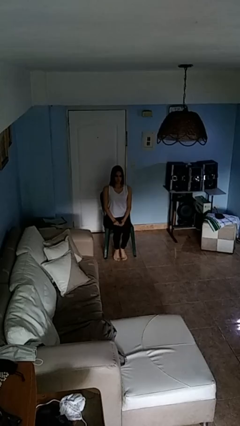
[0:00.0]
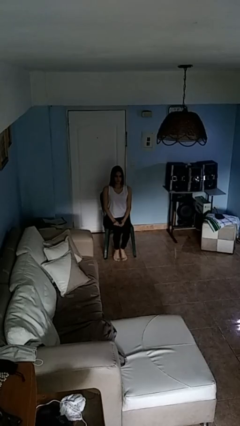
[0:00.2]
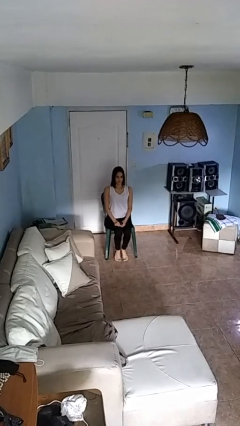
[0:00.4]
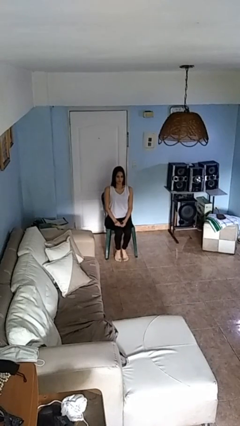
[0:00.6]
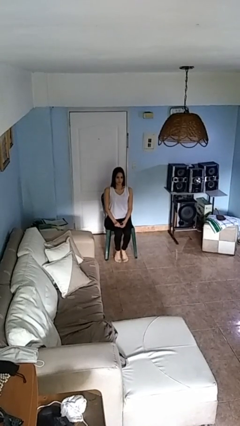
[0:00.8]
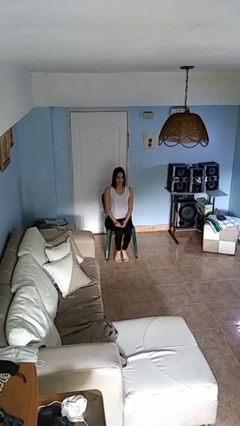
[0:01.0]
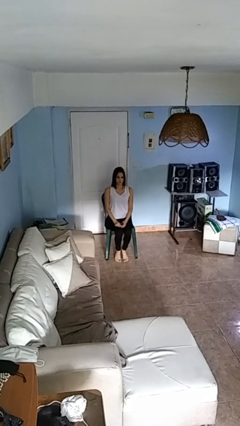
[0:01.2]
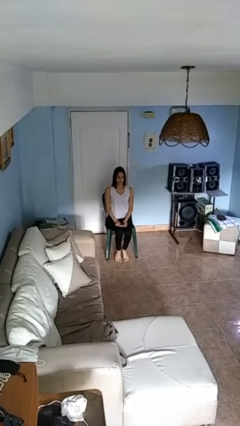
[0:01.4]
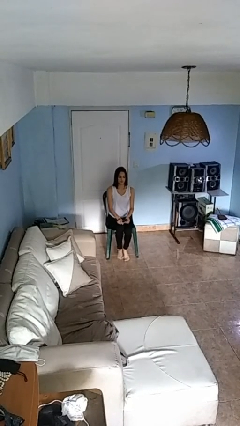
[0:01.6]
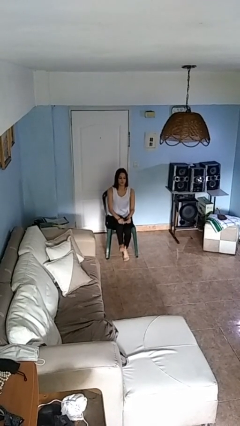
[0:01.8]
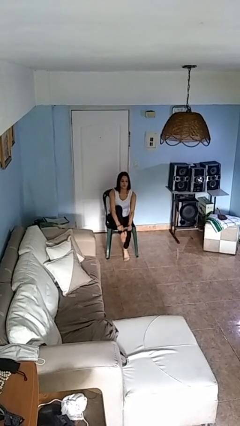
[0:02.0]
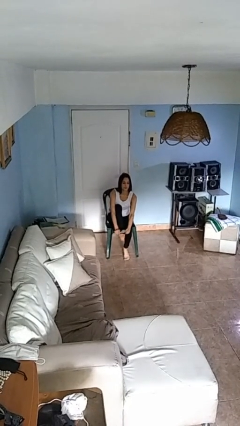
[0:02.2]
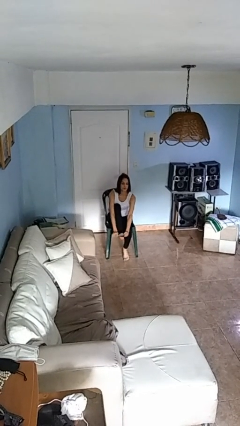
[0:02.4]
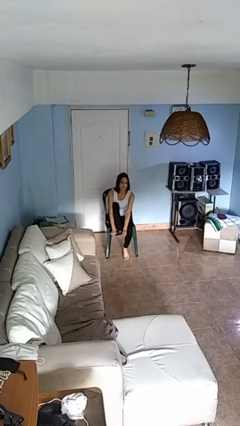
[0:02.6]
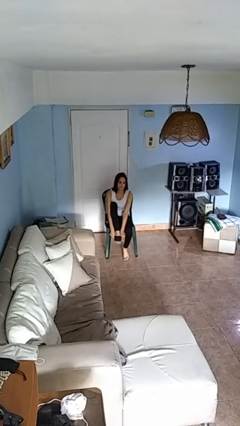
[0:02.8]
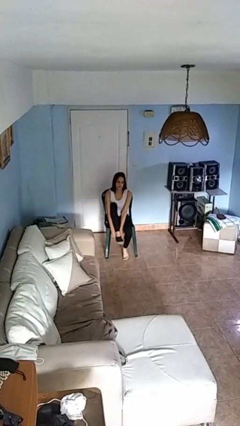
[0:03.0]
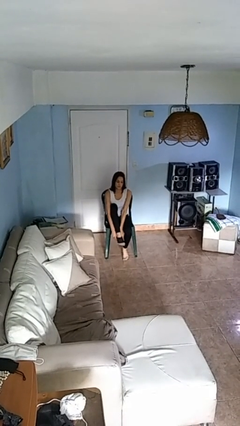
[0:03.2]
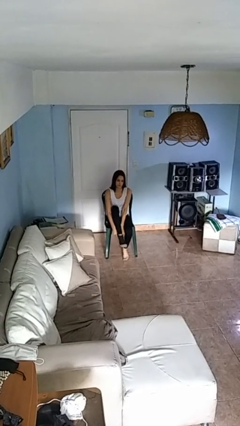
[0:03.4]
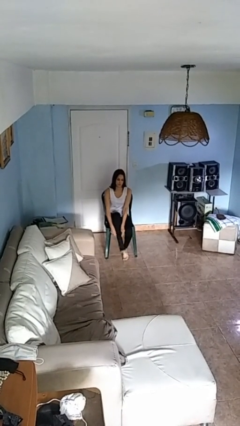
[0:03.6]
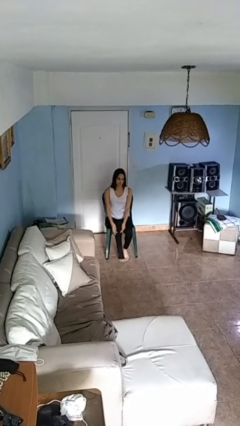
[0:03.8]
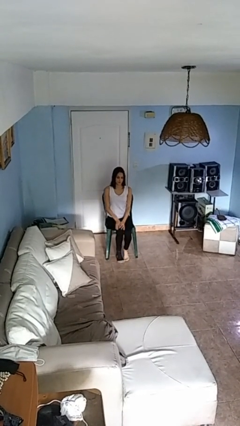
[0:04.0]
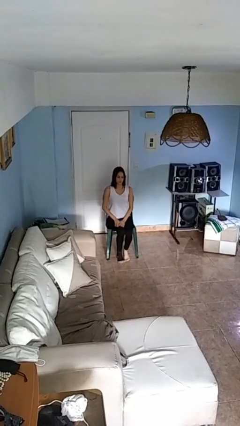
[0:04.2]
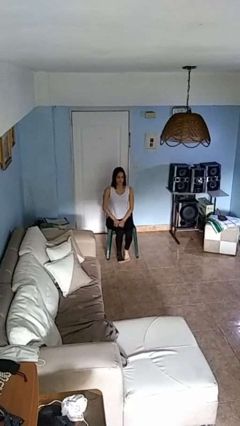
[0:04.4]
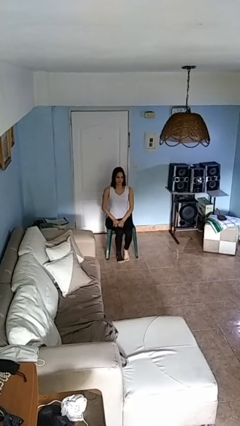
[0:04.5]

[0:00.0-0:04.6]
person puts on socks

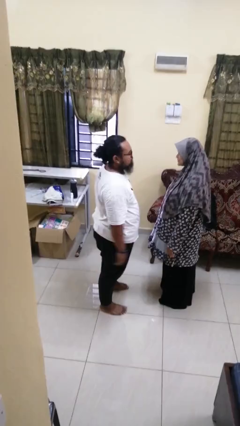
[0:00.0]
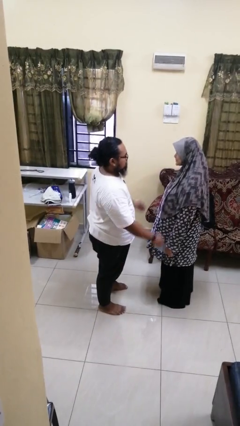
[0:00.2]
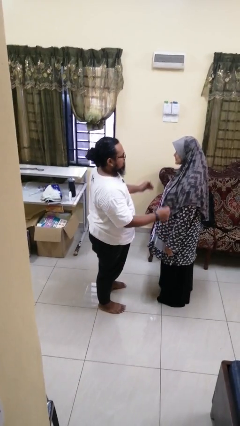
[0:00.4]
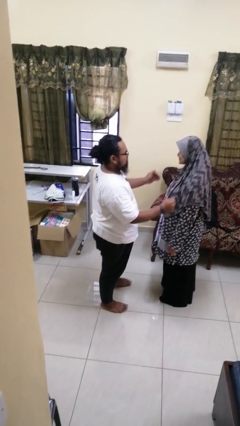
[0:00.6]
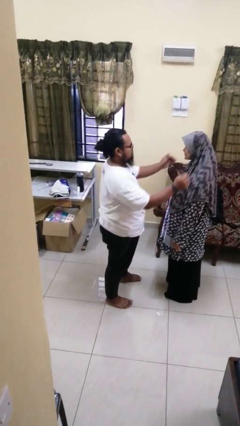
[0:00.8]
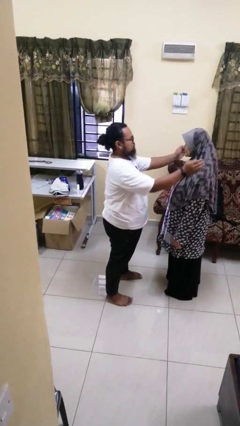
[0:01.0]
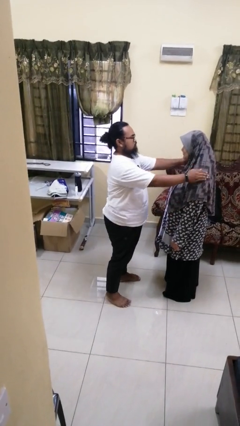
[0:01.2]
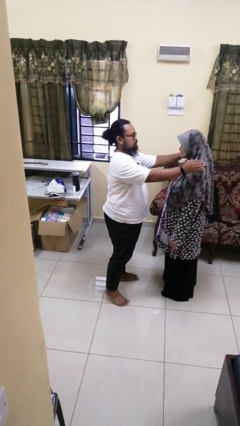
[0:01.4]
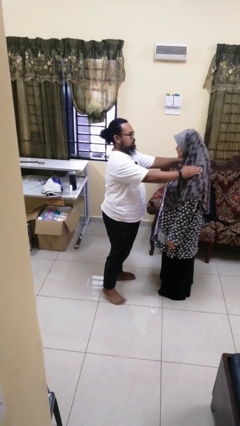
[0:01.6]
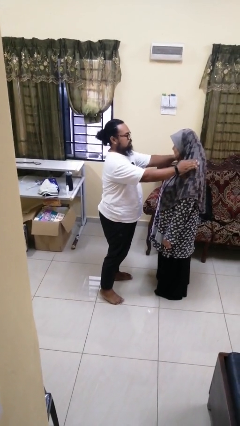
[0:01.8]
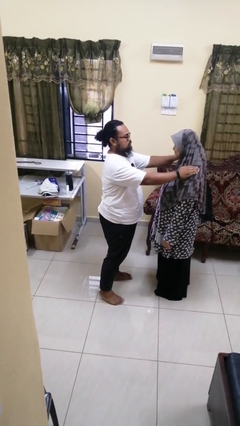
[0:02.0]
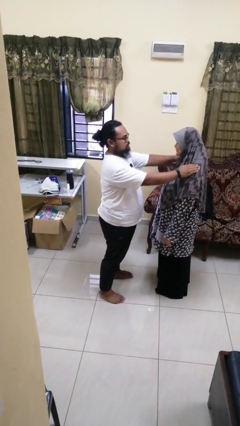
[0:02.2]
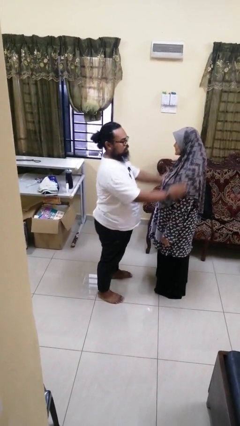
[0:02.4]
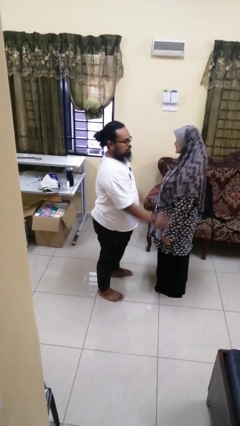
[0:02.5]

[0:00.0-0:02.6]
person pounds shoulders of person

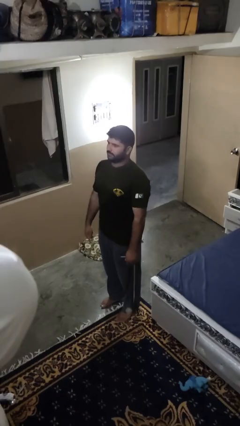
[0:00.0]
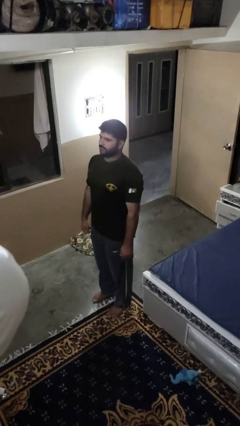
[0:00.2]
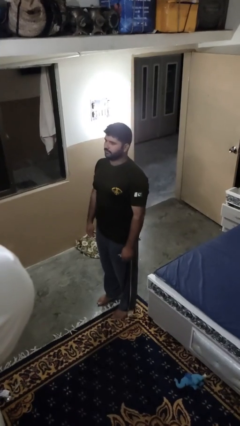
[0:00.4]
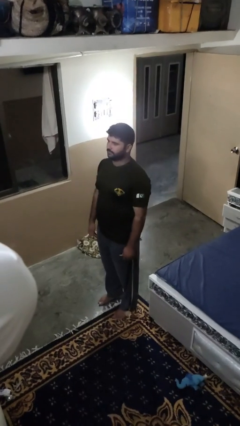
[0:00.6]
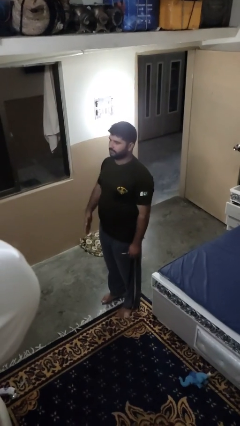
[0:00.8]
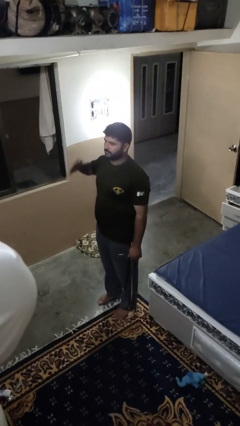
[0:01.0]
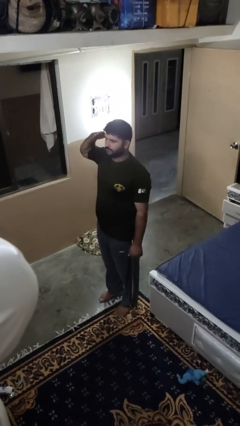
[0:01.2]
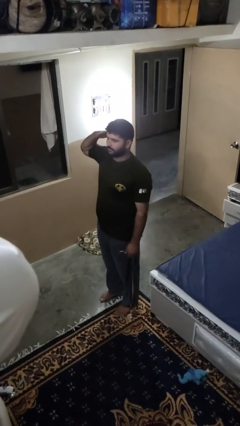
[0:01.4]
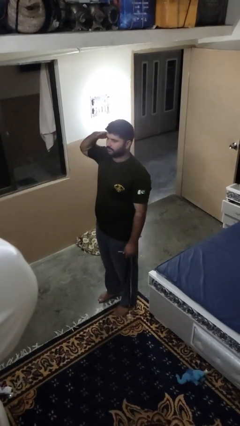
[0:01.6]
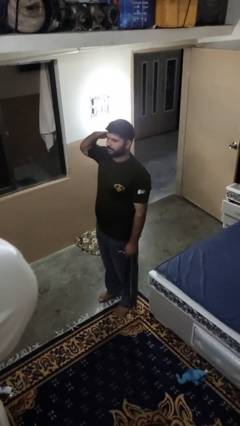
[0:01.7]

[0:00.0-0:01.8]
person salutes

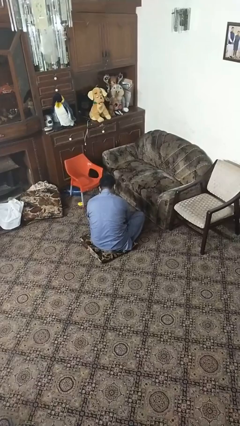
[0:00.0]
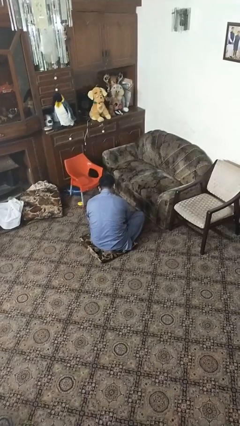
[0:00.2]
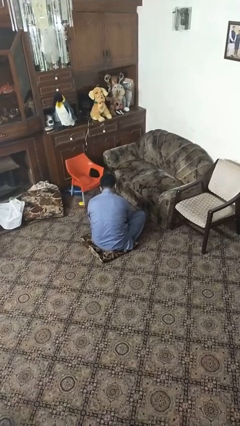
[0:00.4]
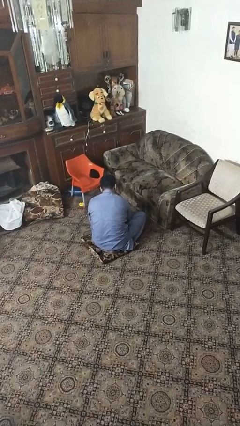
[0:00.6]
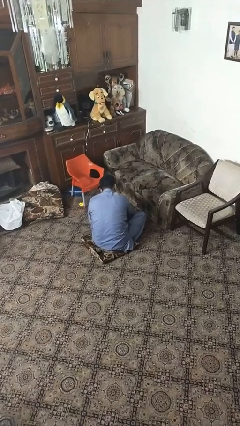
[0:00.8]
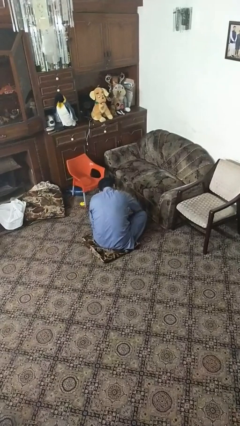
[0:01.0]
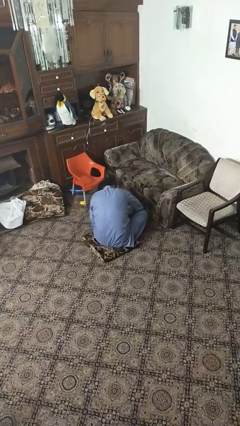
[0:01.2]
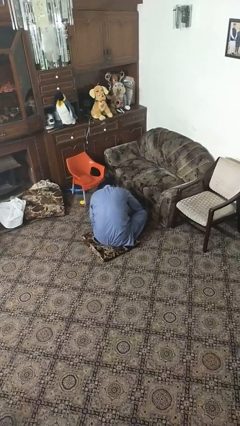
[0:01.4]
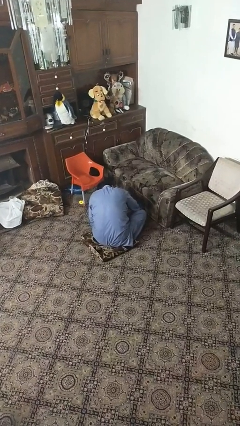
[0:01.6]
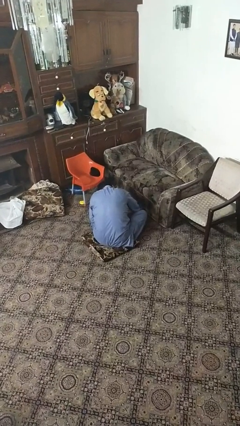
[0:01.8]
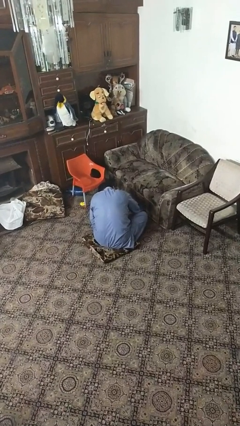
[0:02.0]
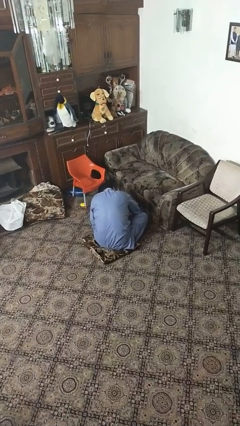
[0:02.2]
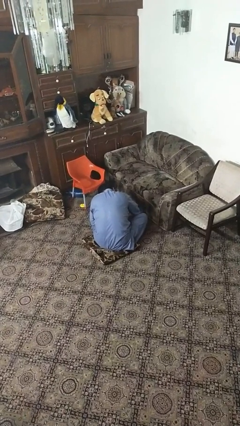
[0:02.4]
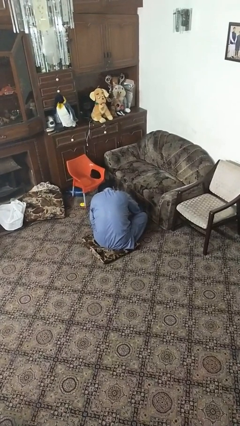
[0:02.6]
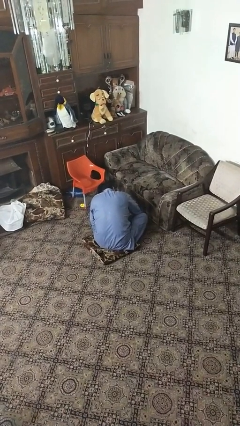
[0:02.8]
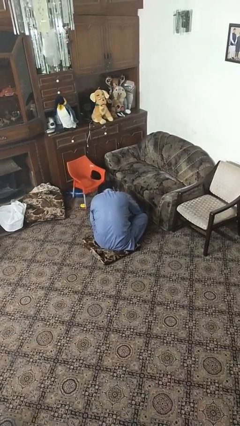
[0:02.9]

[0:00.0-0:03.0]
person searches under couch

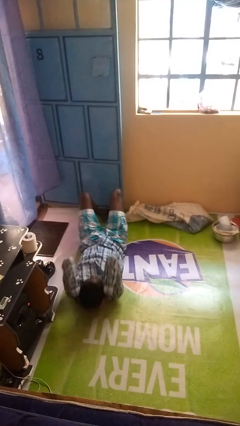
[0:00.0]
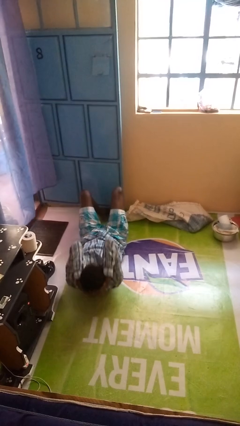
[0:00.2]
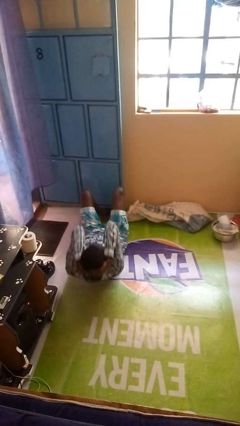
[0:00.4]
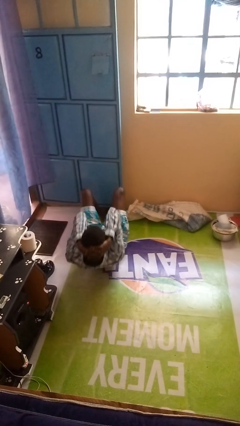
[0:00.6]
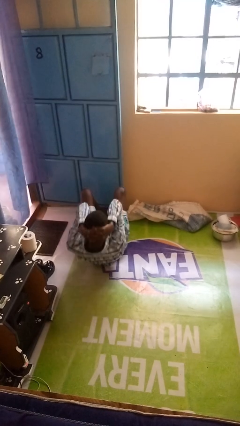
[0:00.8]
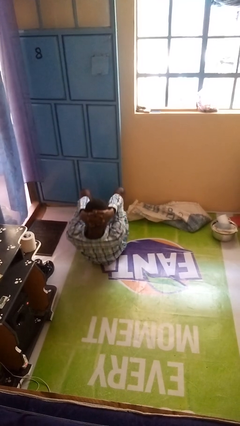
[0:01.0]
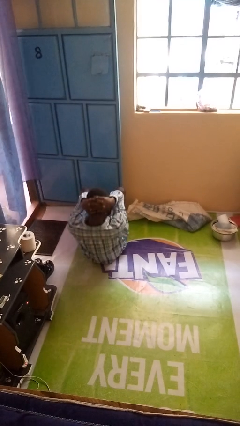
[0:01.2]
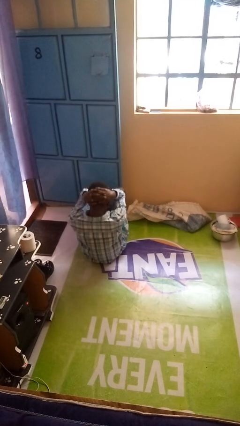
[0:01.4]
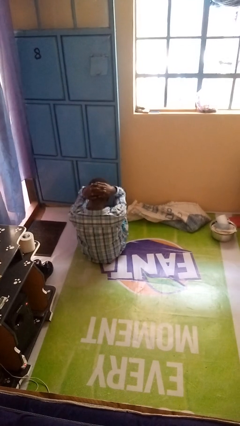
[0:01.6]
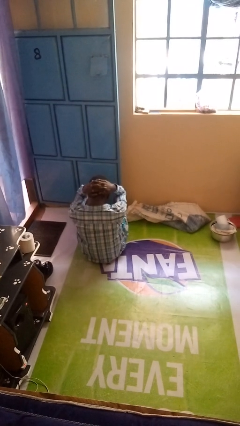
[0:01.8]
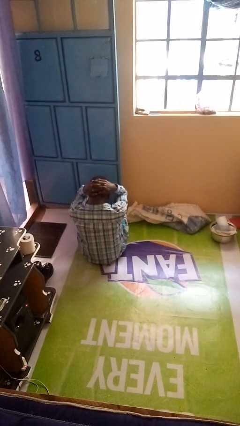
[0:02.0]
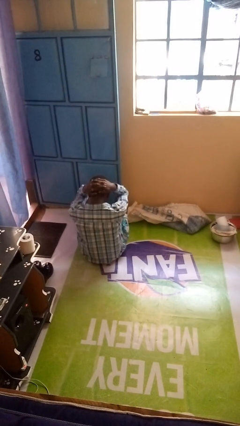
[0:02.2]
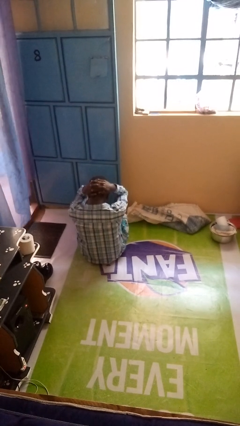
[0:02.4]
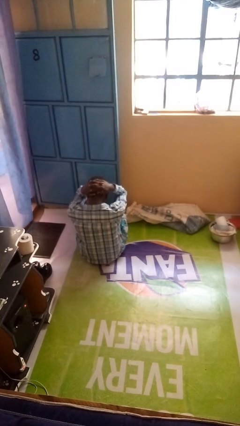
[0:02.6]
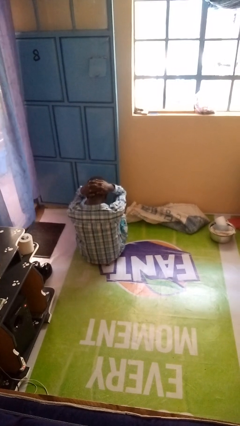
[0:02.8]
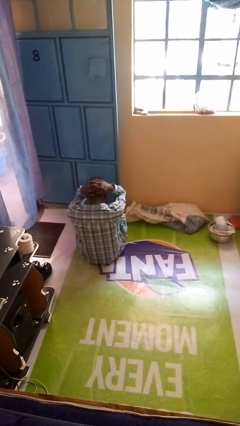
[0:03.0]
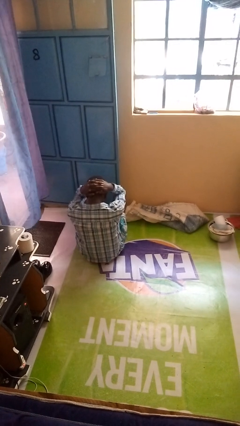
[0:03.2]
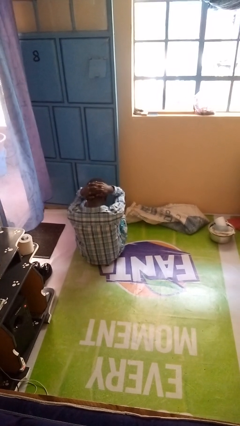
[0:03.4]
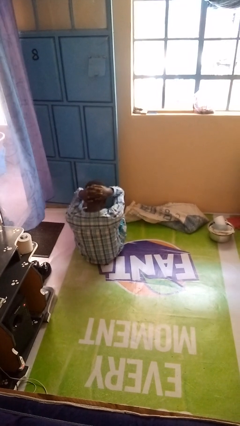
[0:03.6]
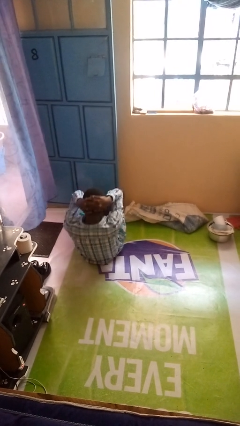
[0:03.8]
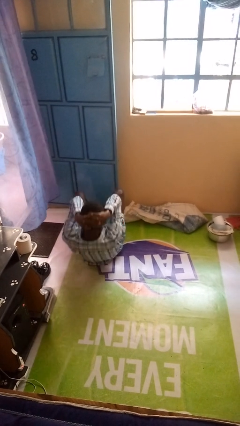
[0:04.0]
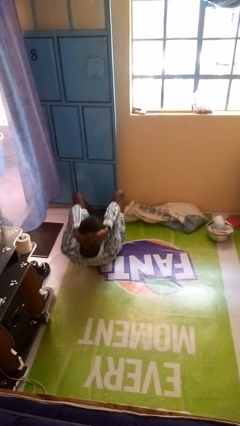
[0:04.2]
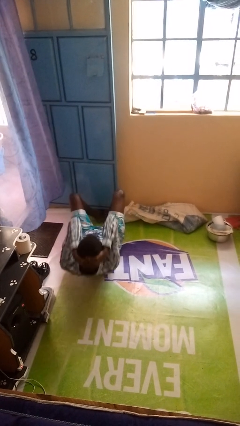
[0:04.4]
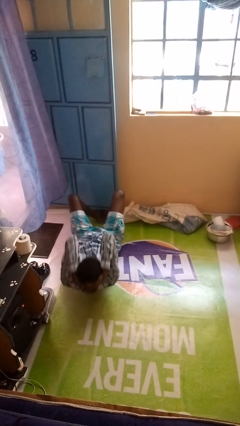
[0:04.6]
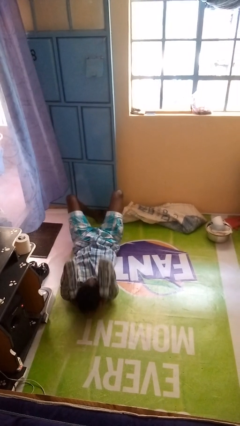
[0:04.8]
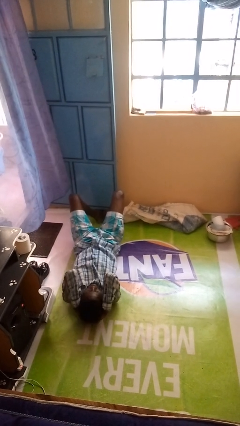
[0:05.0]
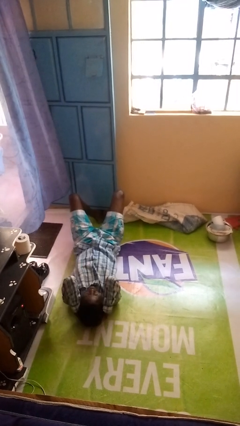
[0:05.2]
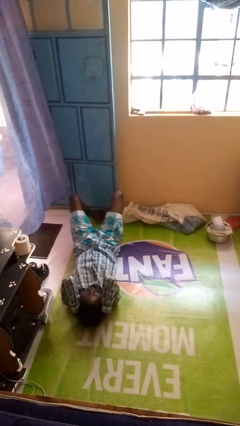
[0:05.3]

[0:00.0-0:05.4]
person exercises with situp

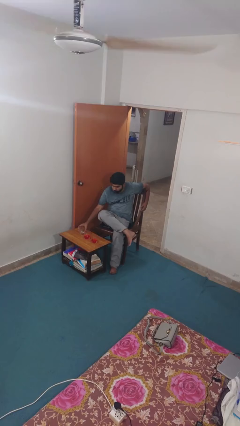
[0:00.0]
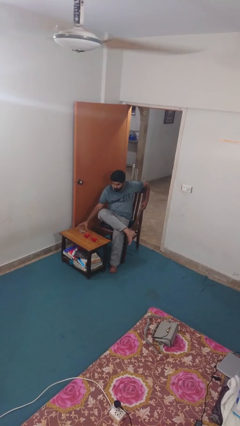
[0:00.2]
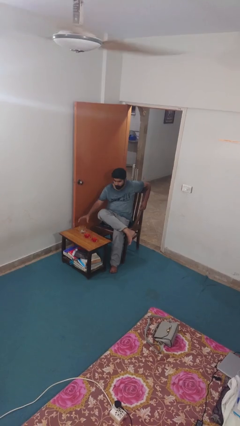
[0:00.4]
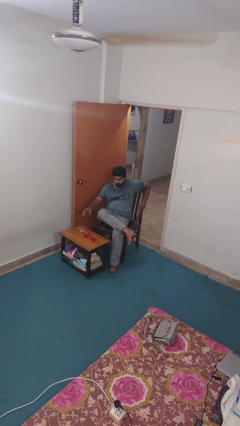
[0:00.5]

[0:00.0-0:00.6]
person puts down object on table
